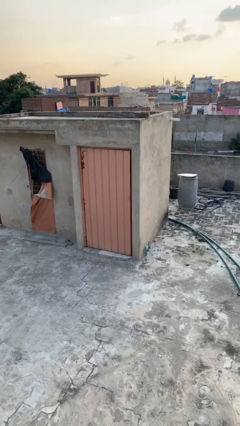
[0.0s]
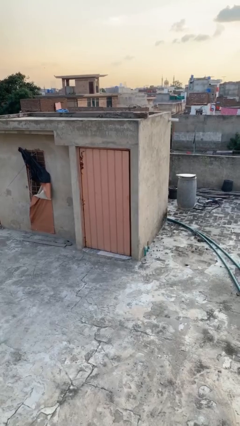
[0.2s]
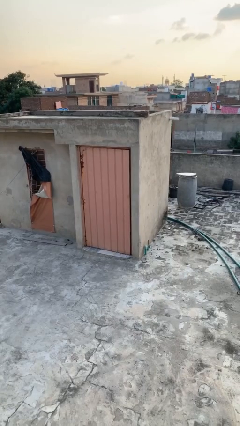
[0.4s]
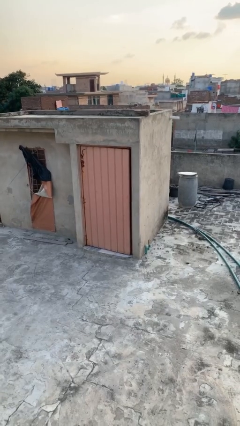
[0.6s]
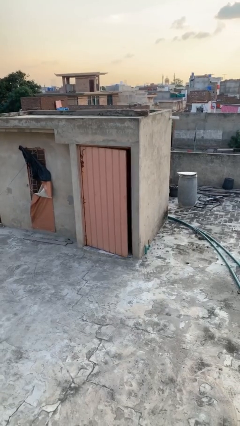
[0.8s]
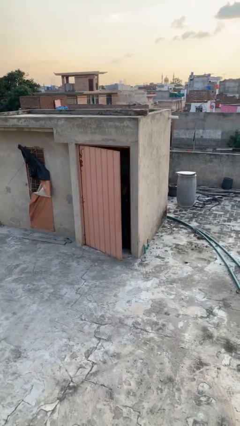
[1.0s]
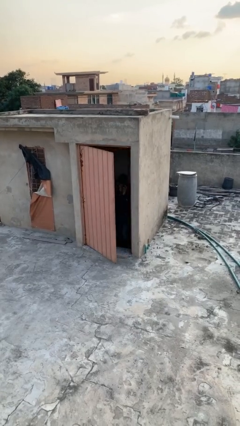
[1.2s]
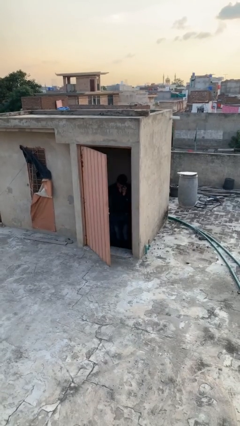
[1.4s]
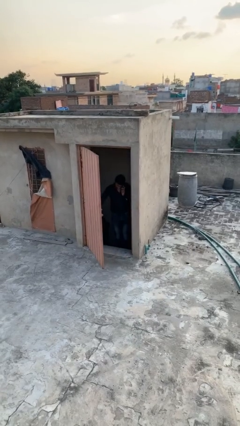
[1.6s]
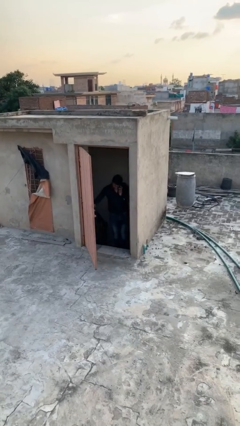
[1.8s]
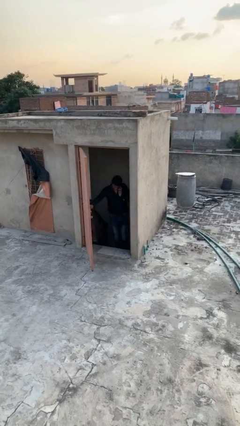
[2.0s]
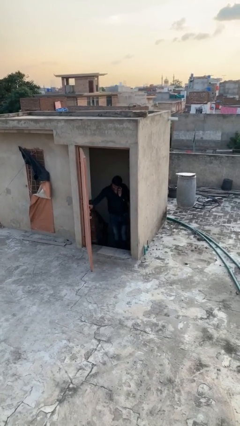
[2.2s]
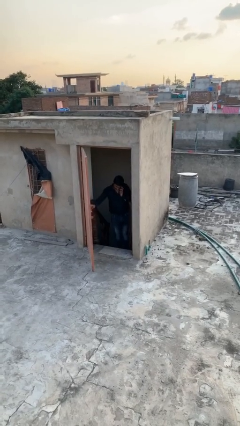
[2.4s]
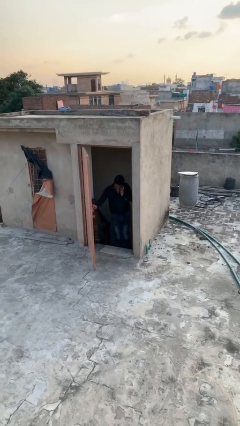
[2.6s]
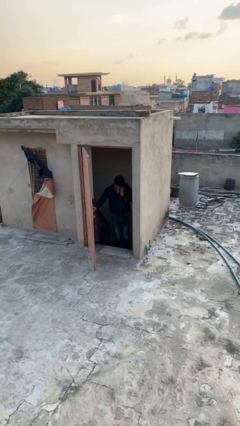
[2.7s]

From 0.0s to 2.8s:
person opens facility door

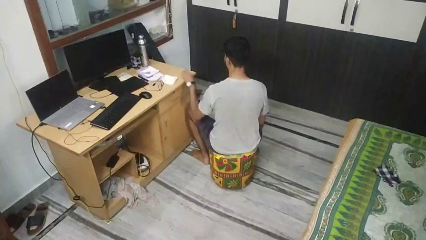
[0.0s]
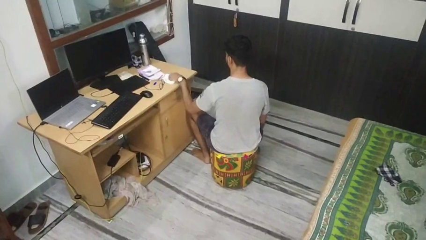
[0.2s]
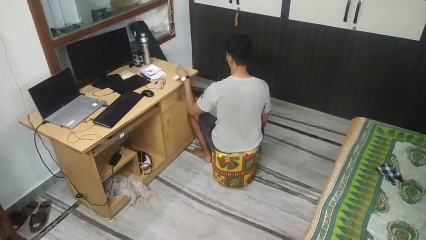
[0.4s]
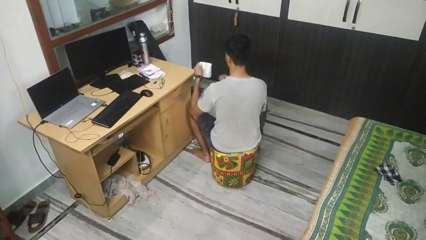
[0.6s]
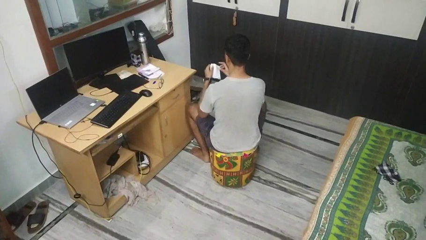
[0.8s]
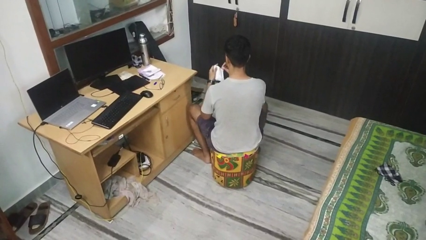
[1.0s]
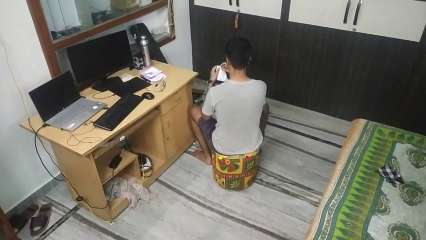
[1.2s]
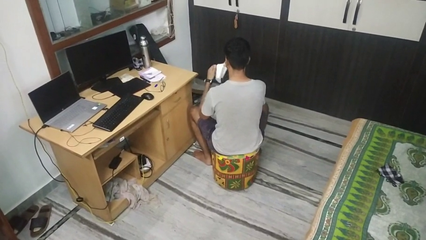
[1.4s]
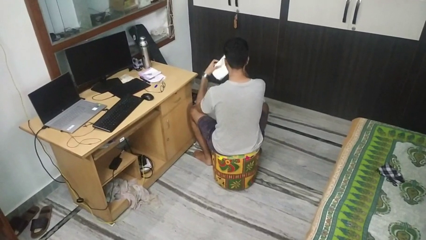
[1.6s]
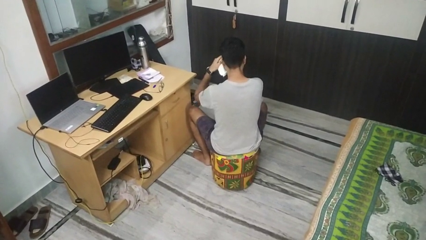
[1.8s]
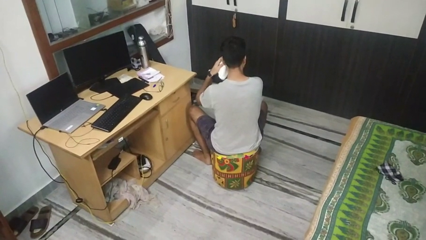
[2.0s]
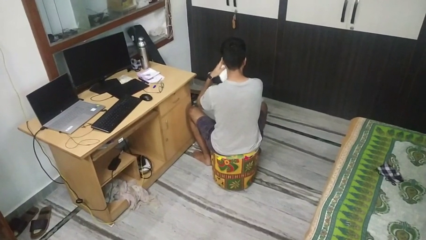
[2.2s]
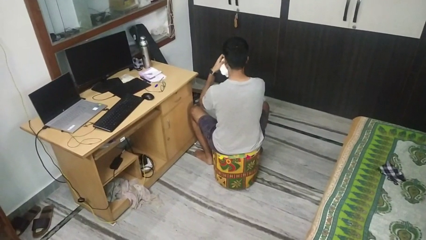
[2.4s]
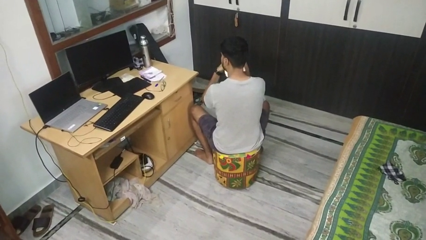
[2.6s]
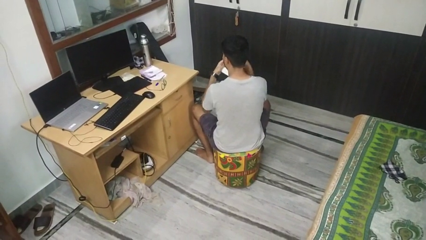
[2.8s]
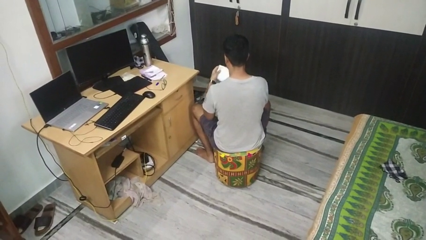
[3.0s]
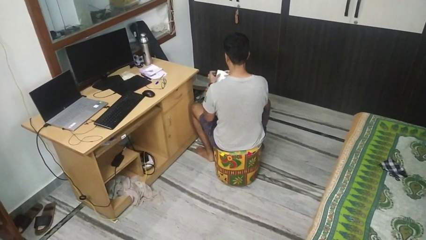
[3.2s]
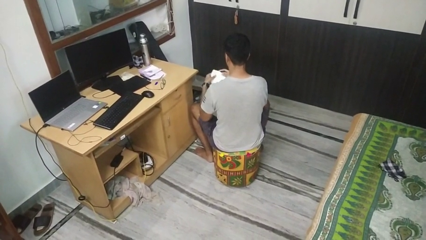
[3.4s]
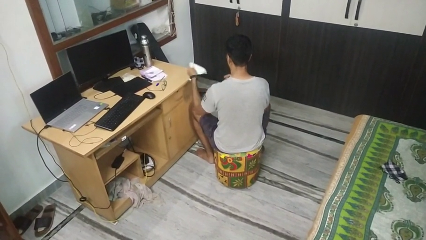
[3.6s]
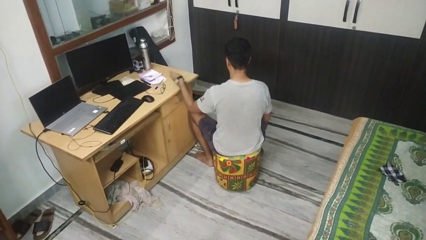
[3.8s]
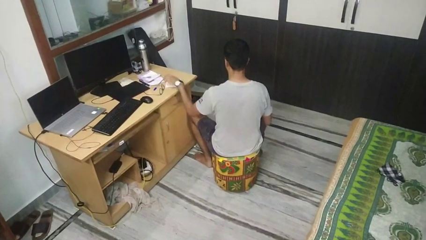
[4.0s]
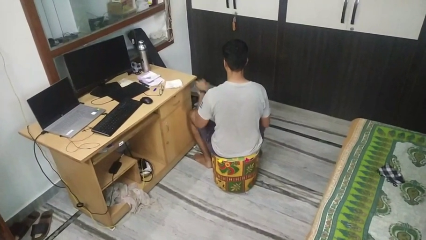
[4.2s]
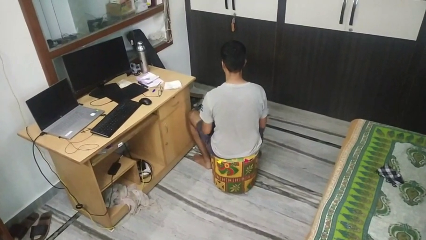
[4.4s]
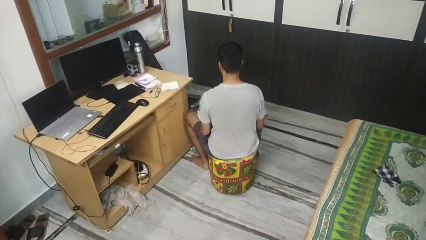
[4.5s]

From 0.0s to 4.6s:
person wipes mouth with napkin

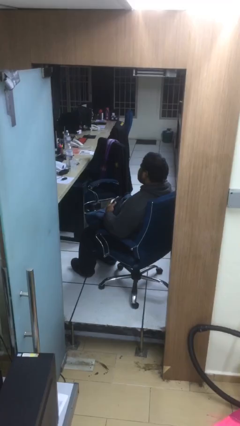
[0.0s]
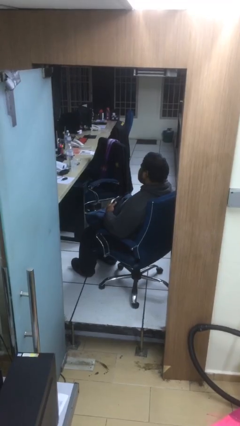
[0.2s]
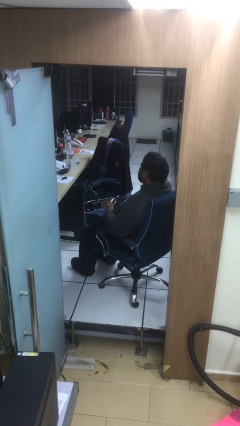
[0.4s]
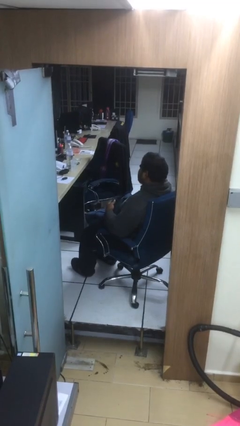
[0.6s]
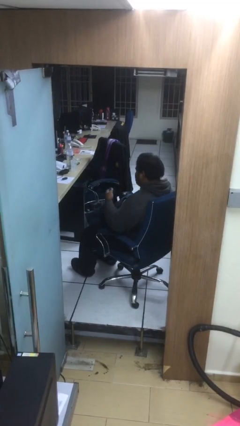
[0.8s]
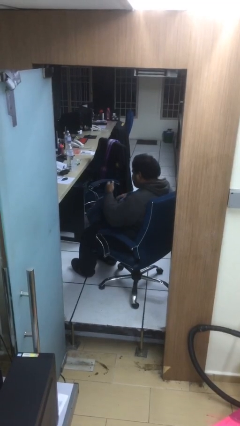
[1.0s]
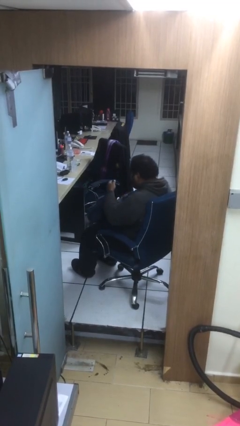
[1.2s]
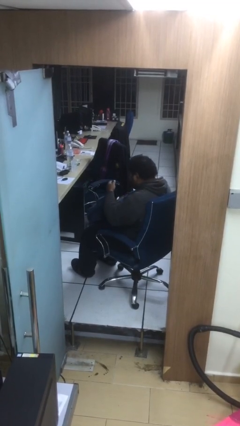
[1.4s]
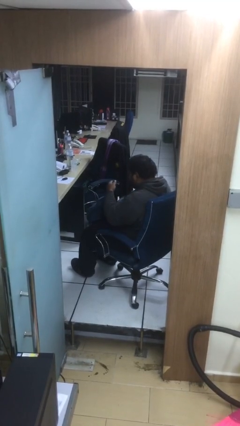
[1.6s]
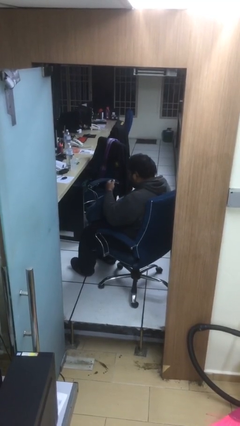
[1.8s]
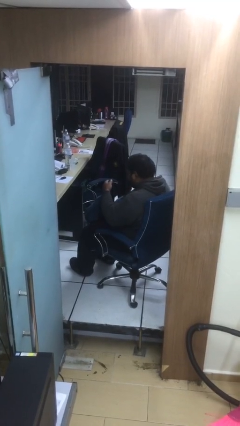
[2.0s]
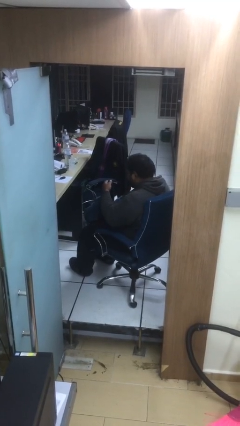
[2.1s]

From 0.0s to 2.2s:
person searches in backpack

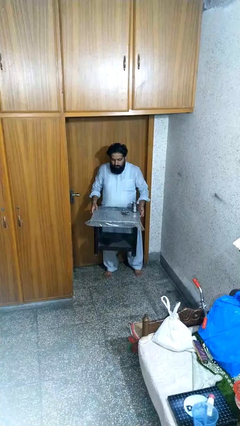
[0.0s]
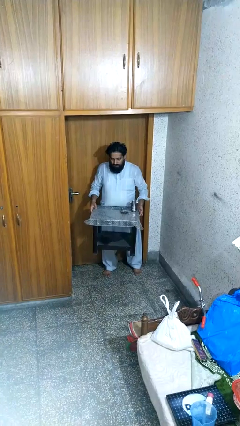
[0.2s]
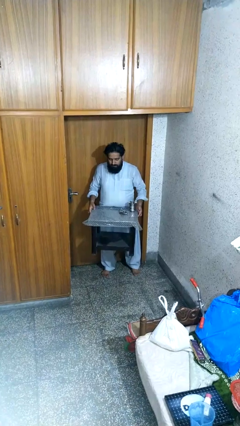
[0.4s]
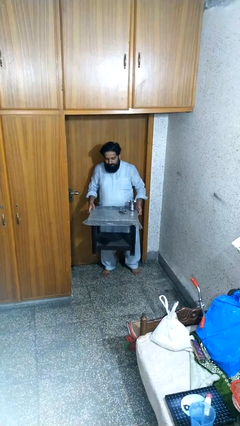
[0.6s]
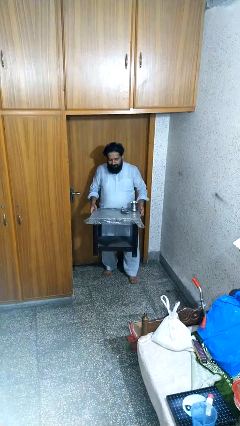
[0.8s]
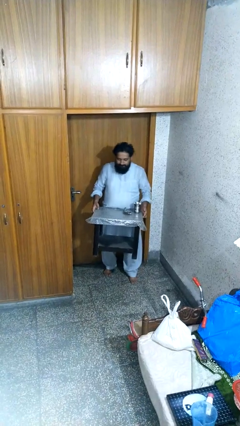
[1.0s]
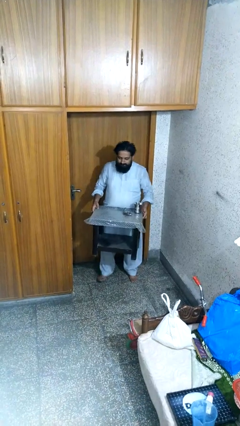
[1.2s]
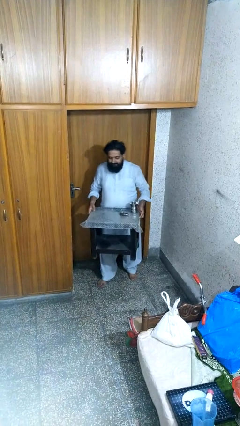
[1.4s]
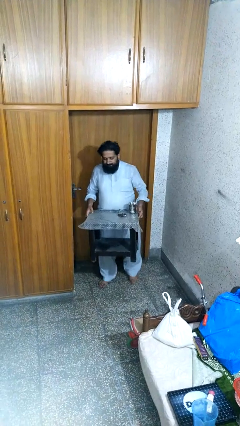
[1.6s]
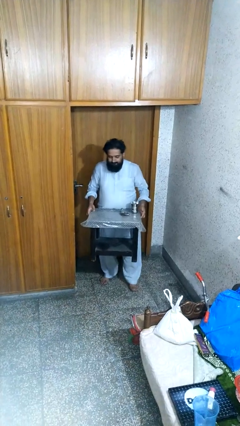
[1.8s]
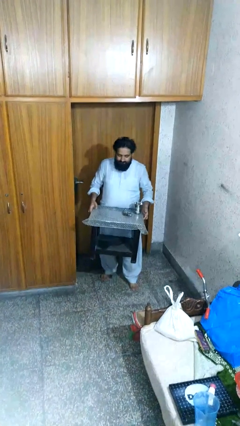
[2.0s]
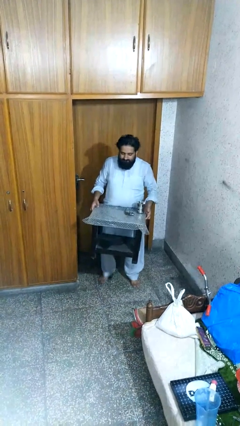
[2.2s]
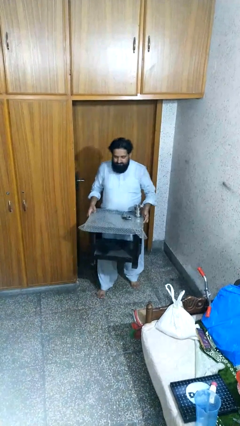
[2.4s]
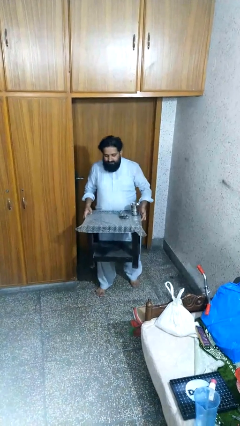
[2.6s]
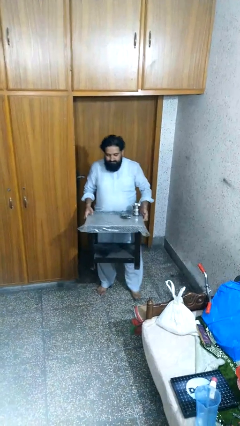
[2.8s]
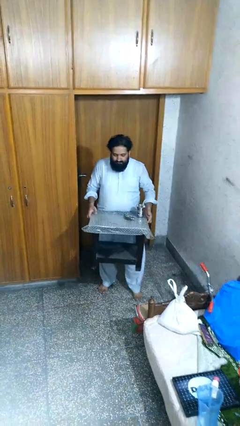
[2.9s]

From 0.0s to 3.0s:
person carries furniture

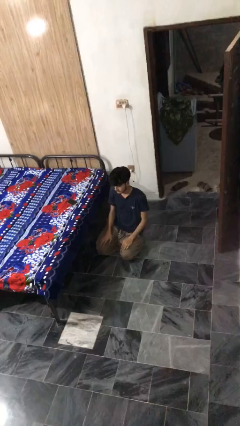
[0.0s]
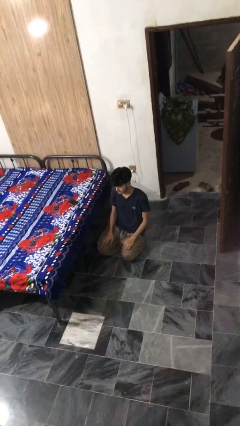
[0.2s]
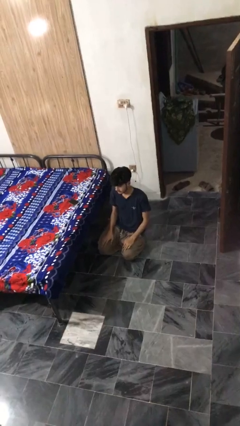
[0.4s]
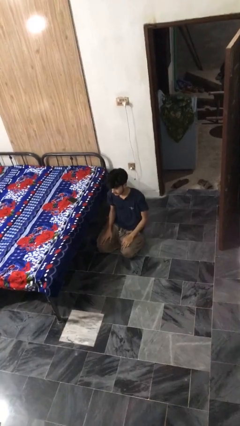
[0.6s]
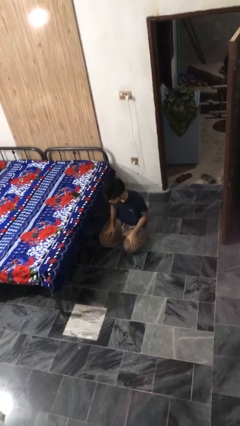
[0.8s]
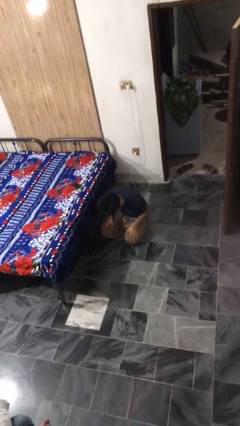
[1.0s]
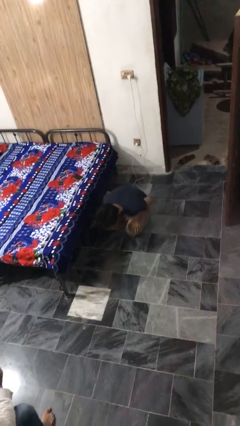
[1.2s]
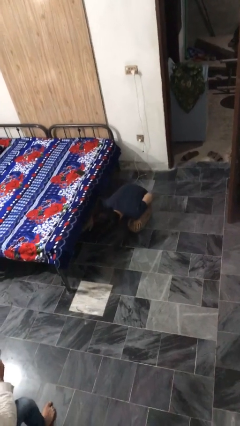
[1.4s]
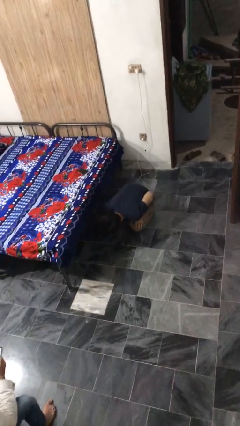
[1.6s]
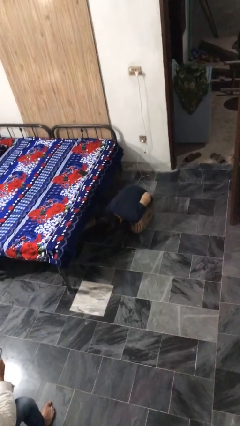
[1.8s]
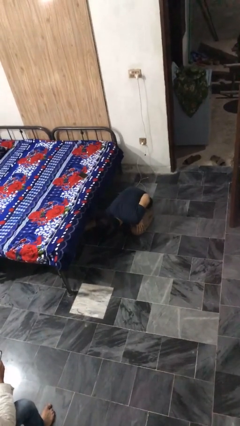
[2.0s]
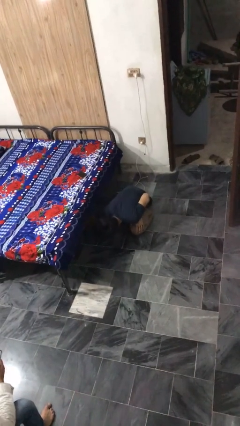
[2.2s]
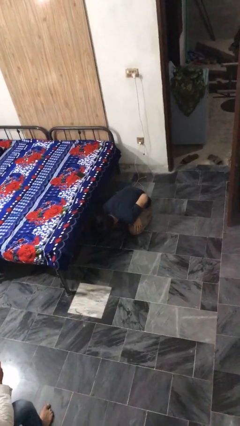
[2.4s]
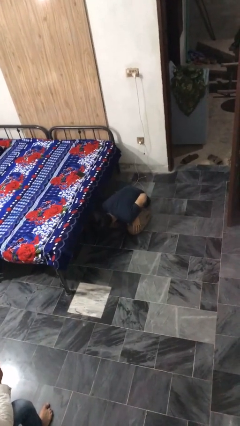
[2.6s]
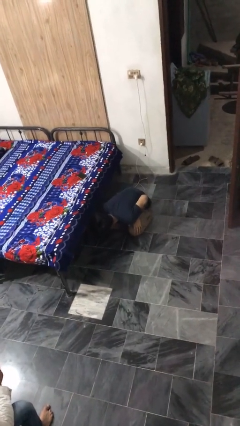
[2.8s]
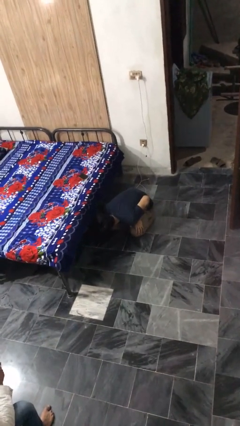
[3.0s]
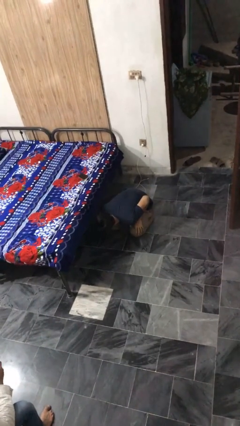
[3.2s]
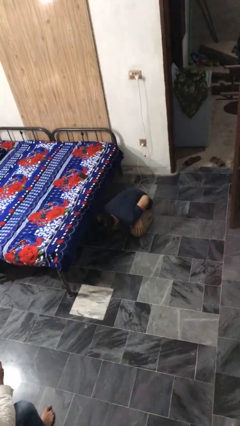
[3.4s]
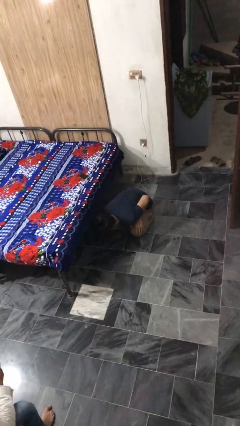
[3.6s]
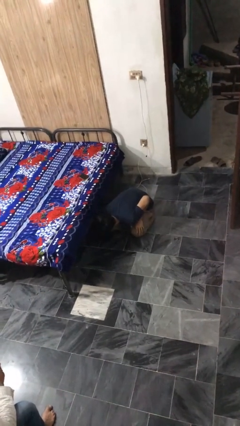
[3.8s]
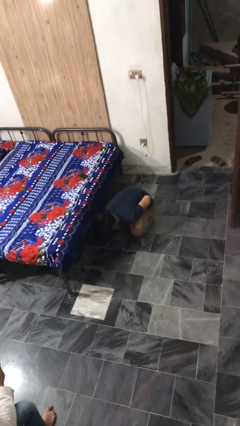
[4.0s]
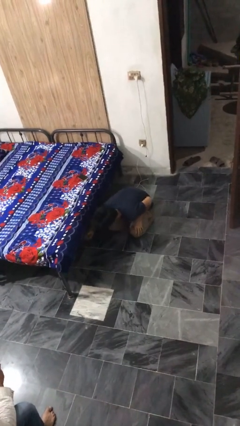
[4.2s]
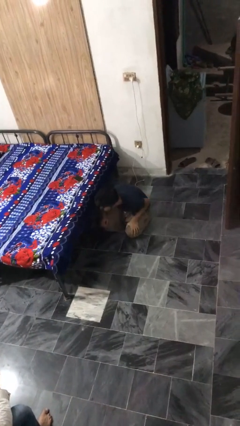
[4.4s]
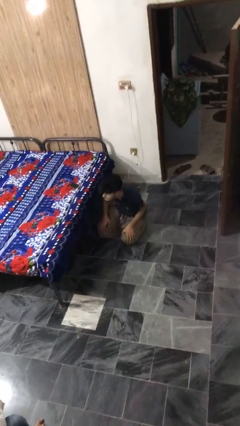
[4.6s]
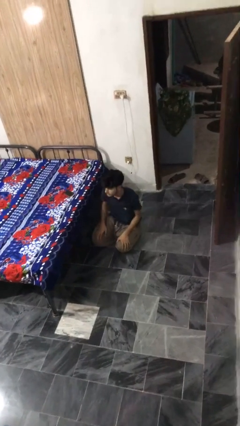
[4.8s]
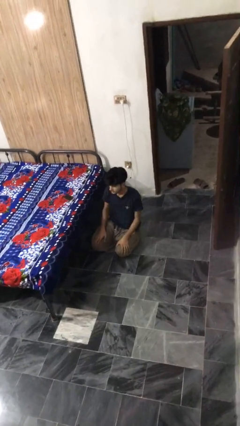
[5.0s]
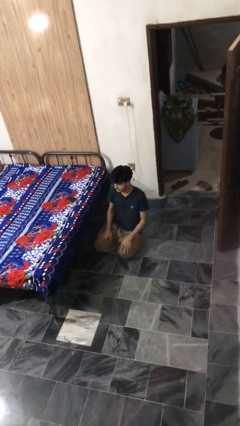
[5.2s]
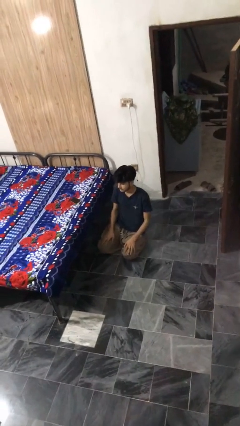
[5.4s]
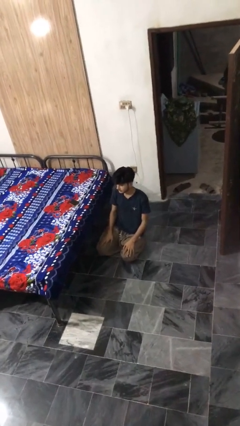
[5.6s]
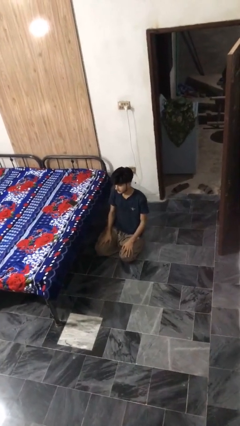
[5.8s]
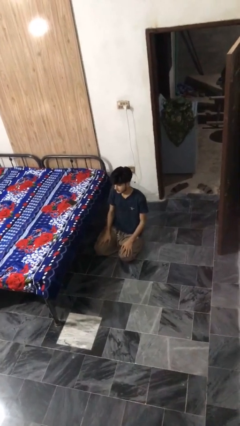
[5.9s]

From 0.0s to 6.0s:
person searches under bed
